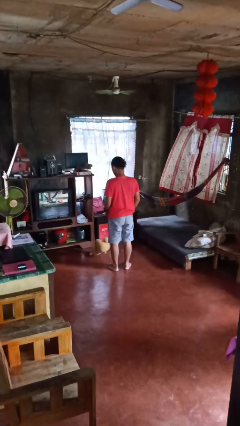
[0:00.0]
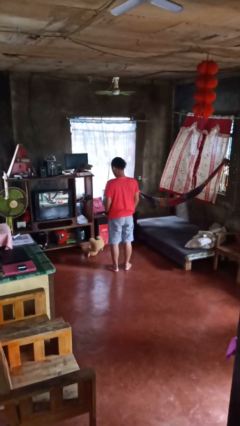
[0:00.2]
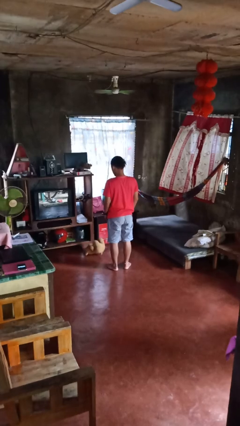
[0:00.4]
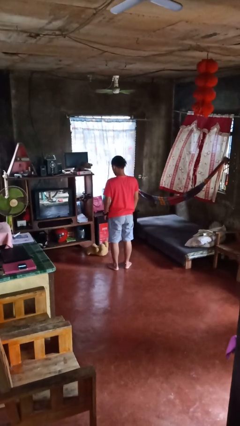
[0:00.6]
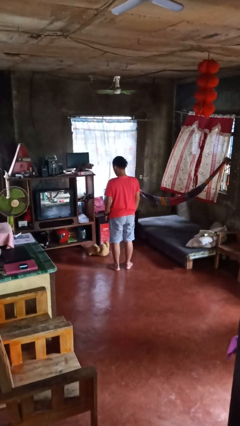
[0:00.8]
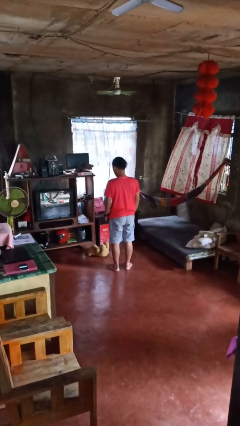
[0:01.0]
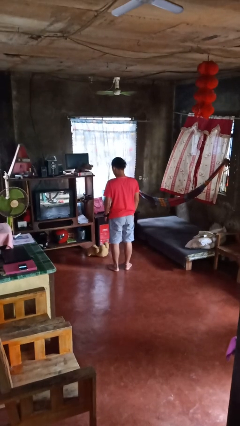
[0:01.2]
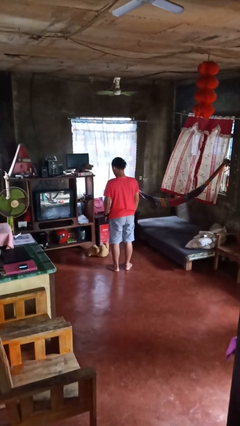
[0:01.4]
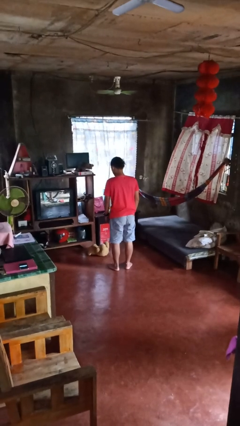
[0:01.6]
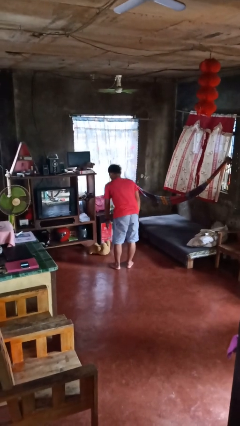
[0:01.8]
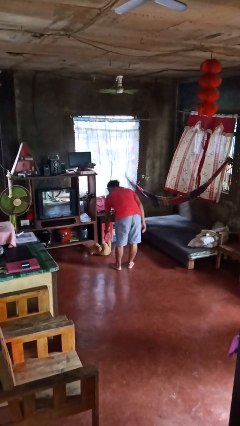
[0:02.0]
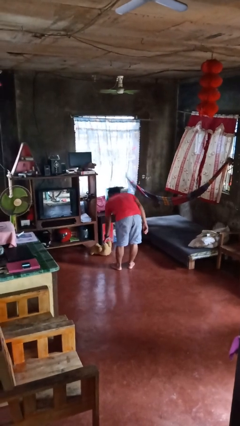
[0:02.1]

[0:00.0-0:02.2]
person drops object

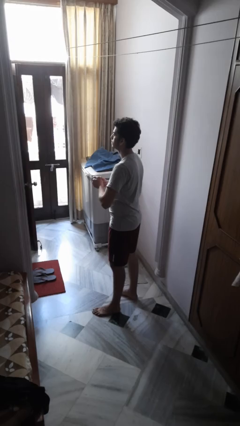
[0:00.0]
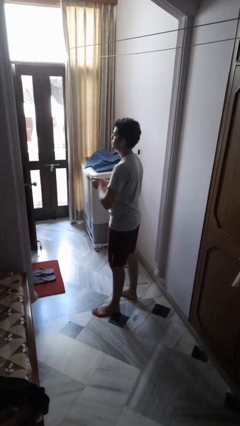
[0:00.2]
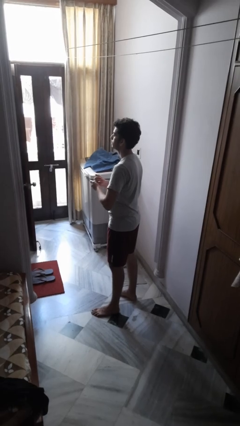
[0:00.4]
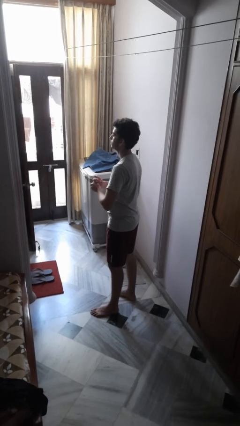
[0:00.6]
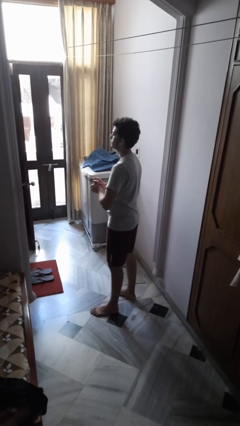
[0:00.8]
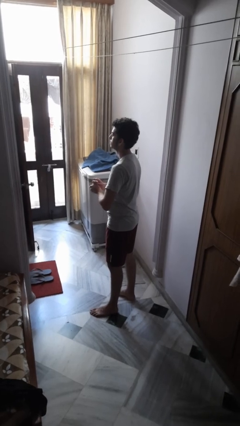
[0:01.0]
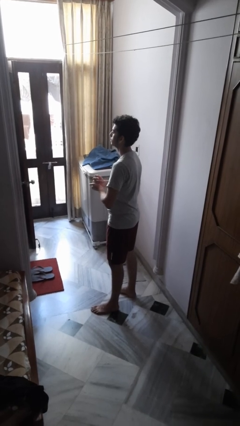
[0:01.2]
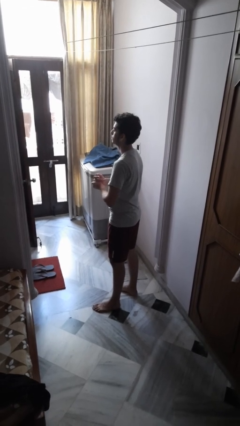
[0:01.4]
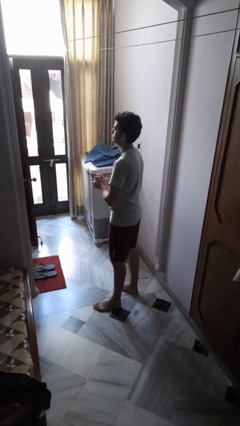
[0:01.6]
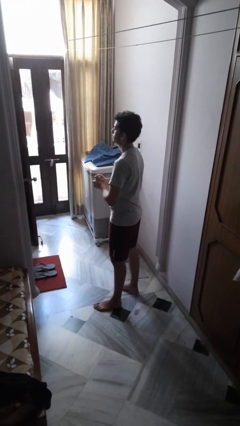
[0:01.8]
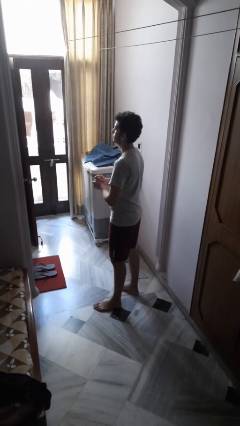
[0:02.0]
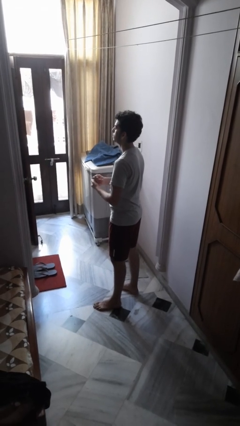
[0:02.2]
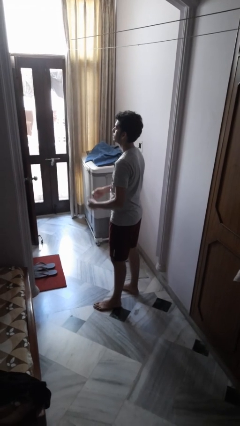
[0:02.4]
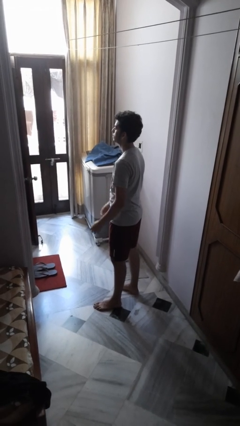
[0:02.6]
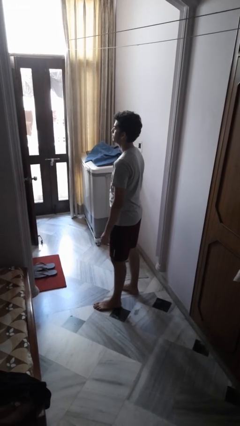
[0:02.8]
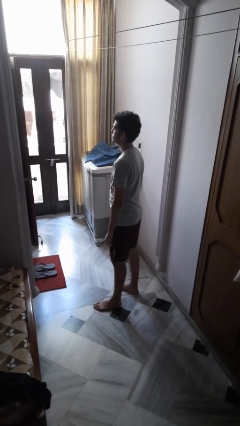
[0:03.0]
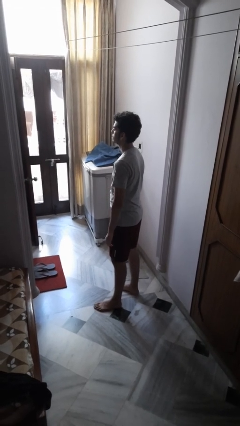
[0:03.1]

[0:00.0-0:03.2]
person cracks knuckles

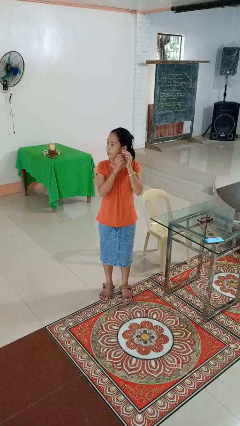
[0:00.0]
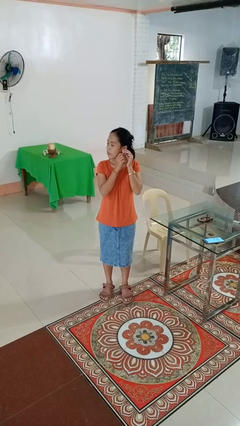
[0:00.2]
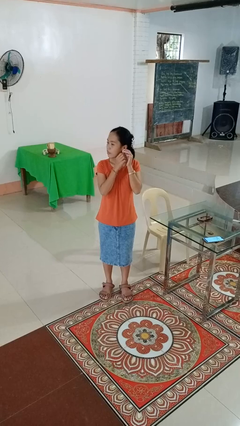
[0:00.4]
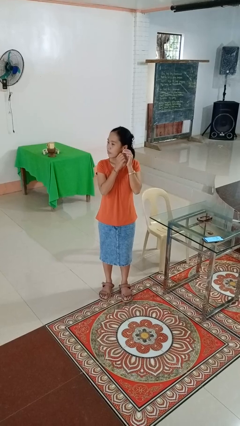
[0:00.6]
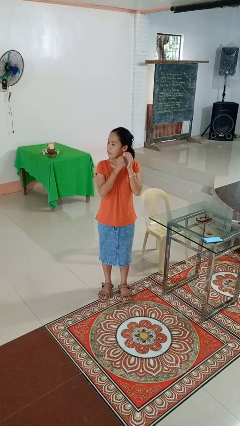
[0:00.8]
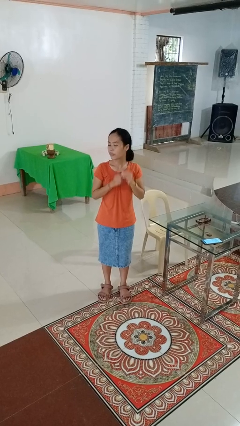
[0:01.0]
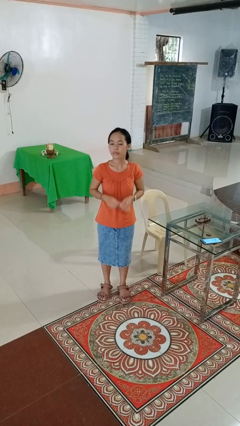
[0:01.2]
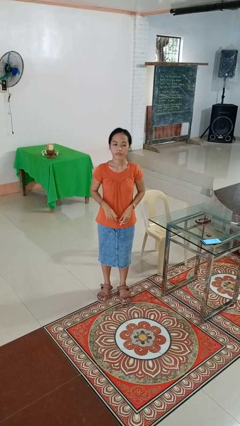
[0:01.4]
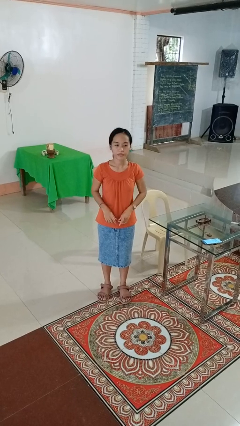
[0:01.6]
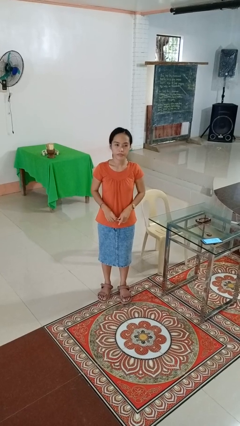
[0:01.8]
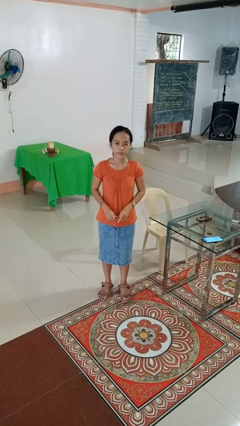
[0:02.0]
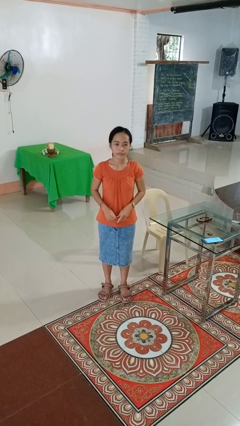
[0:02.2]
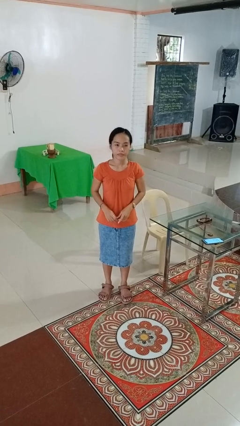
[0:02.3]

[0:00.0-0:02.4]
person takes off earrings

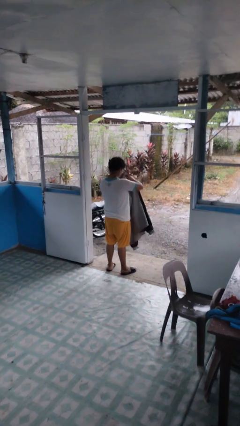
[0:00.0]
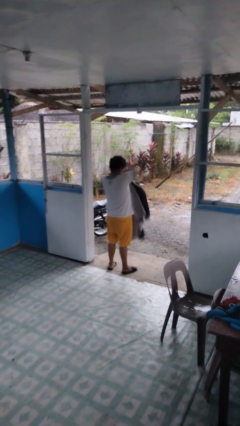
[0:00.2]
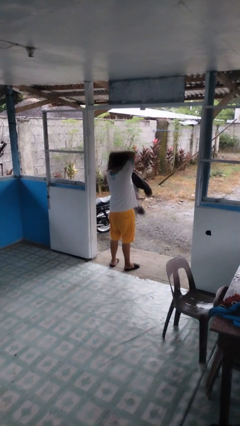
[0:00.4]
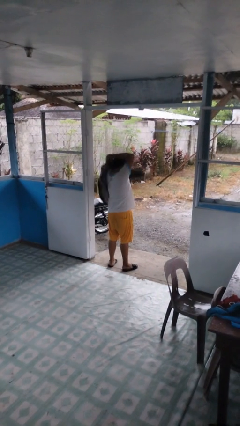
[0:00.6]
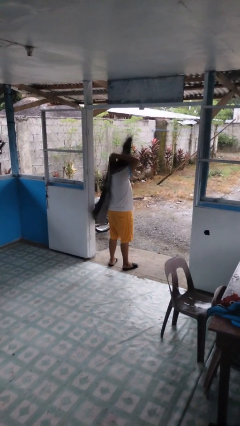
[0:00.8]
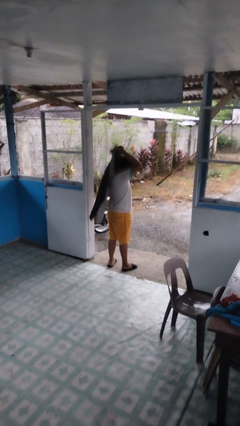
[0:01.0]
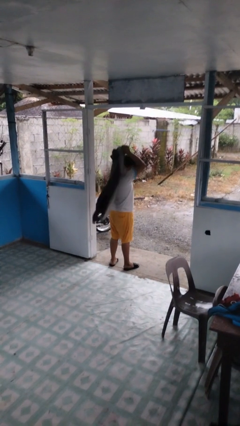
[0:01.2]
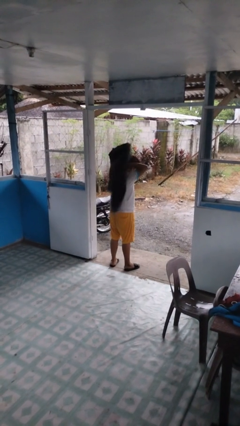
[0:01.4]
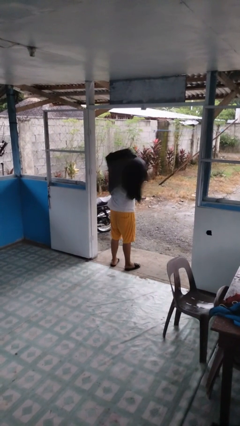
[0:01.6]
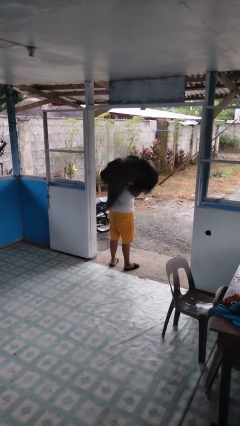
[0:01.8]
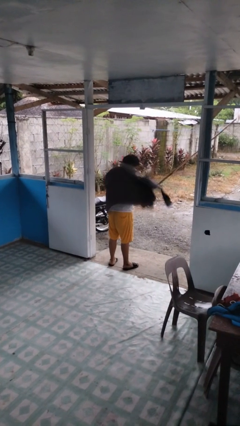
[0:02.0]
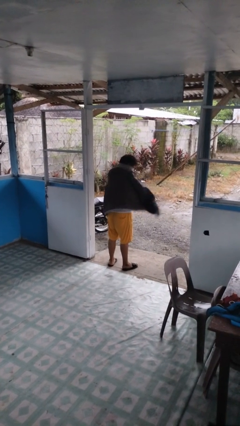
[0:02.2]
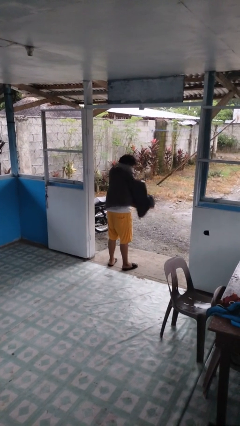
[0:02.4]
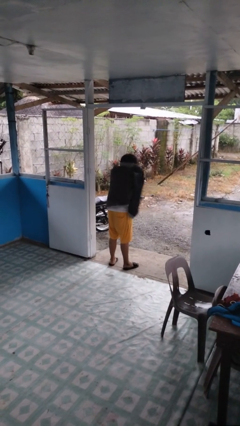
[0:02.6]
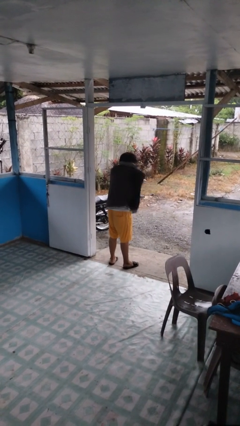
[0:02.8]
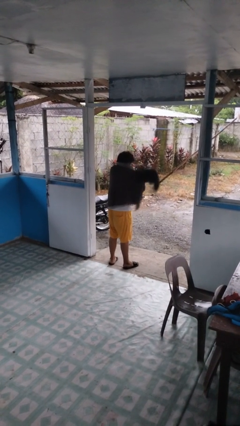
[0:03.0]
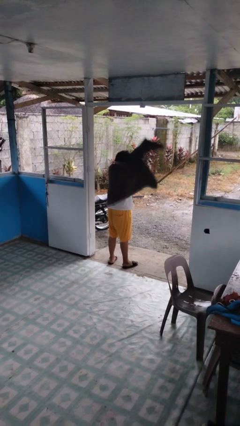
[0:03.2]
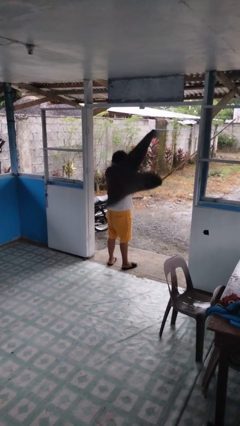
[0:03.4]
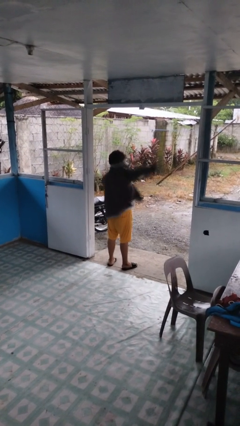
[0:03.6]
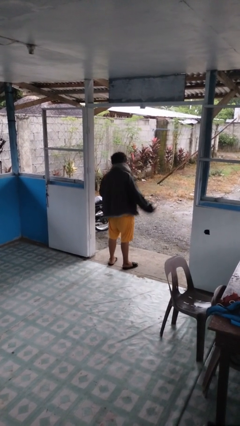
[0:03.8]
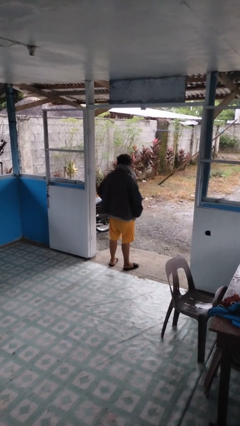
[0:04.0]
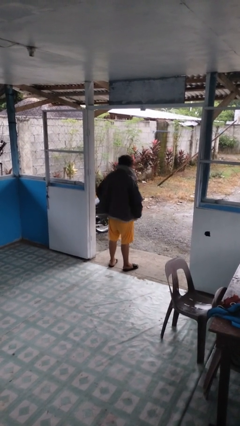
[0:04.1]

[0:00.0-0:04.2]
person puts on jacket

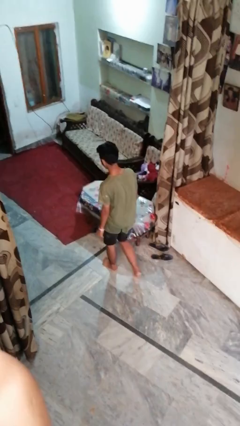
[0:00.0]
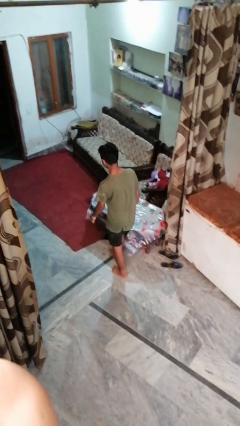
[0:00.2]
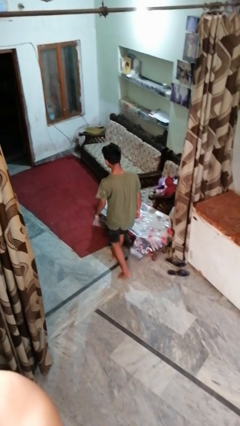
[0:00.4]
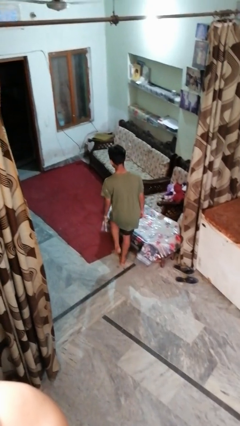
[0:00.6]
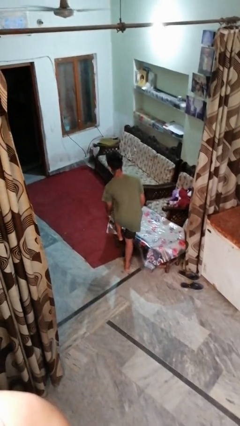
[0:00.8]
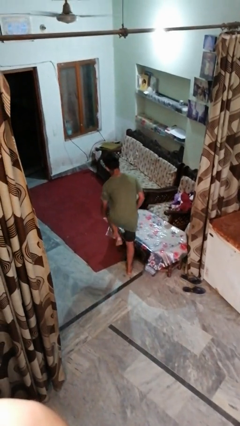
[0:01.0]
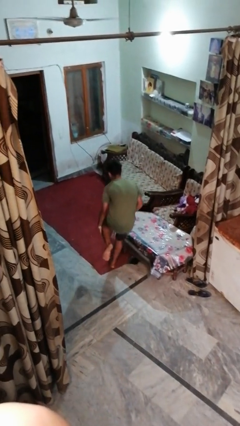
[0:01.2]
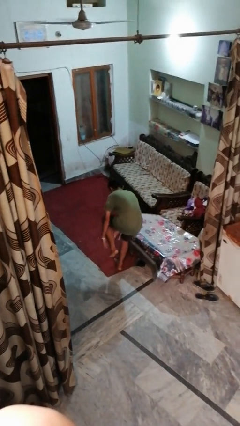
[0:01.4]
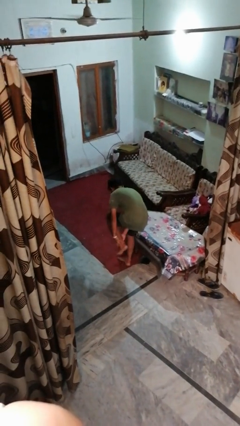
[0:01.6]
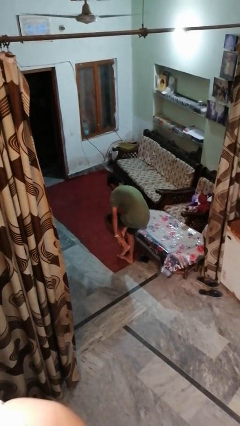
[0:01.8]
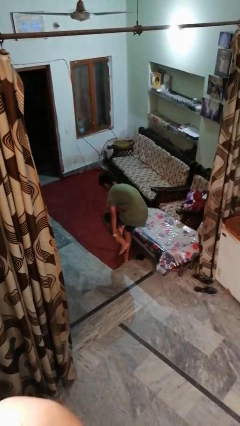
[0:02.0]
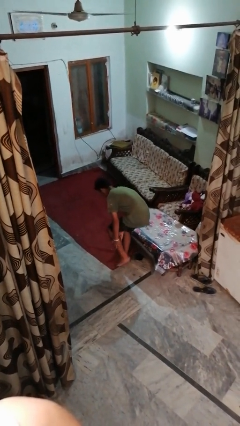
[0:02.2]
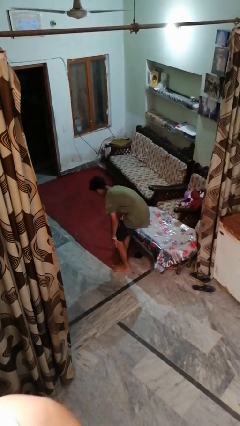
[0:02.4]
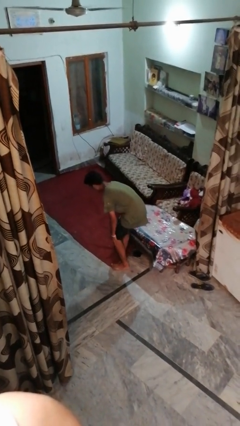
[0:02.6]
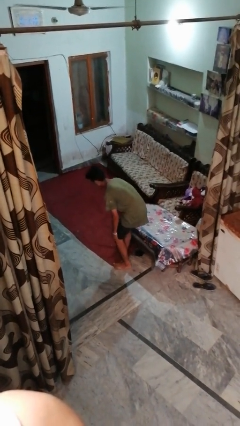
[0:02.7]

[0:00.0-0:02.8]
person stubs toe

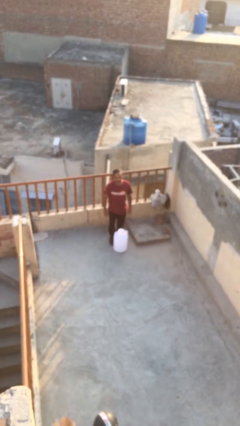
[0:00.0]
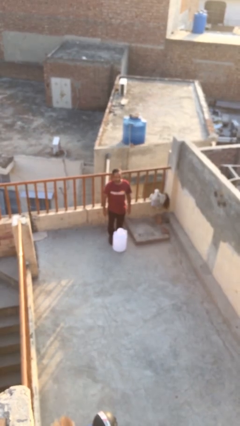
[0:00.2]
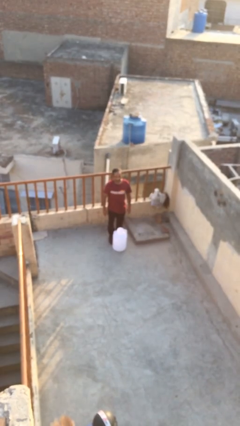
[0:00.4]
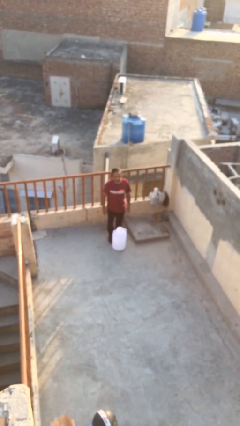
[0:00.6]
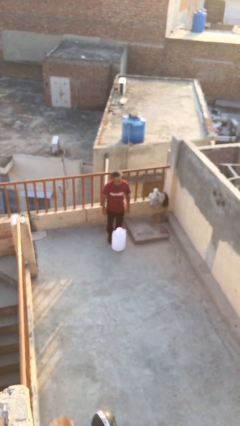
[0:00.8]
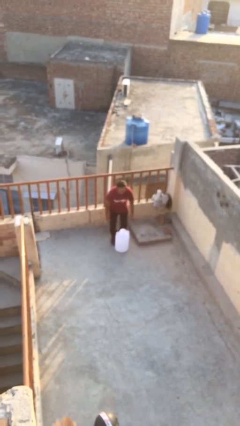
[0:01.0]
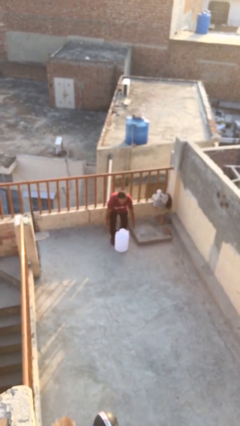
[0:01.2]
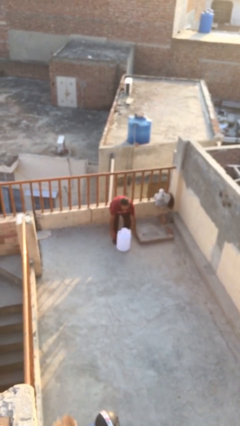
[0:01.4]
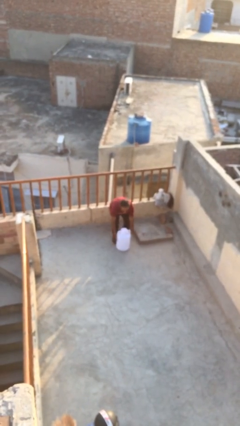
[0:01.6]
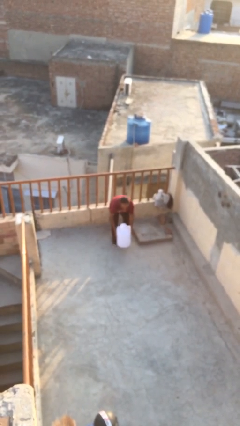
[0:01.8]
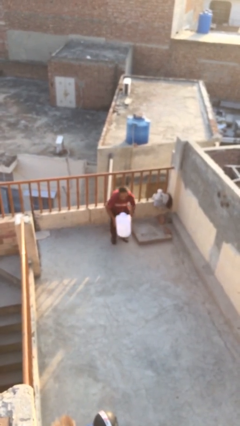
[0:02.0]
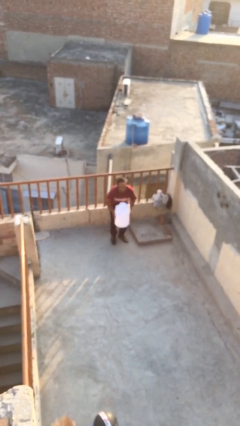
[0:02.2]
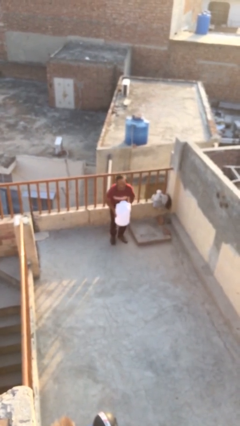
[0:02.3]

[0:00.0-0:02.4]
person picks up object from floor

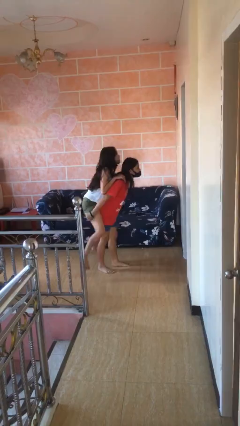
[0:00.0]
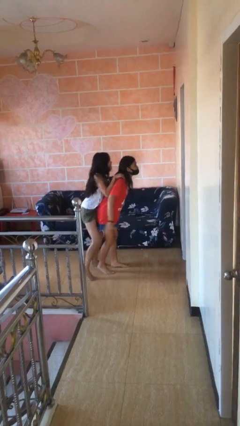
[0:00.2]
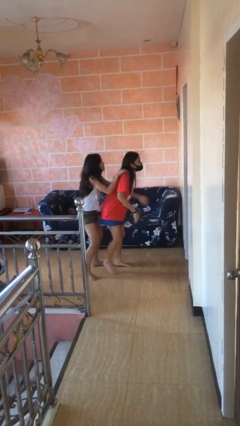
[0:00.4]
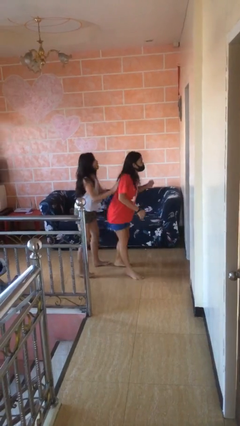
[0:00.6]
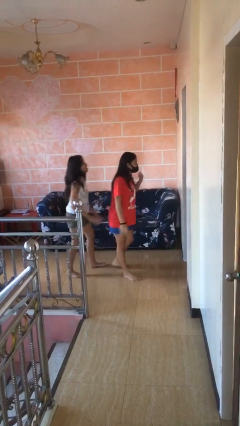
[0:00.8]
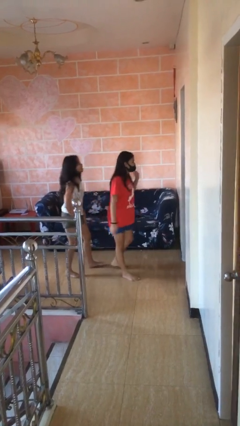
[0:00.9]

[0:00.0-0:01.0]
person puts down person
